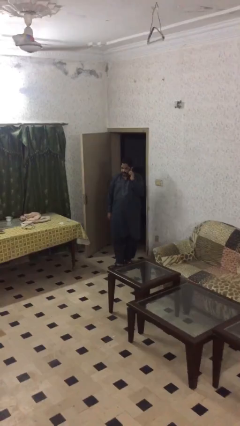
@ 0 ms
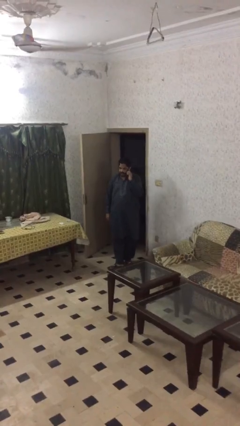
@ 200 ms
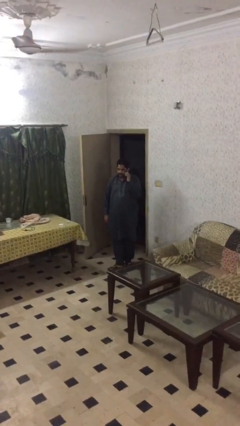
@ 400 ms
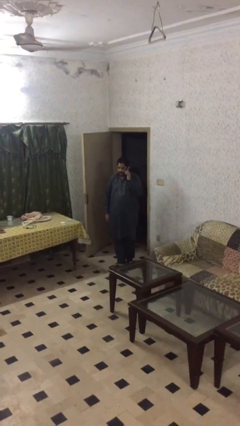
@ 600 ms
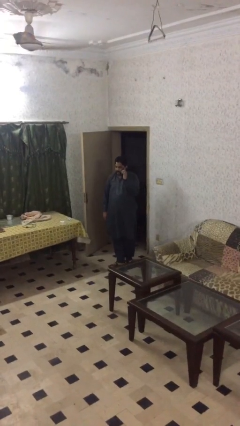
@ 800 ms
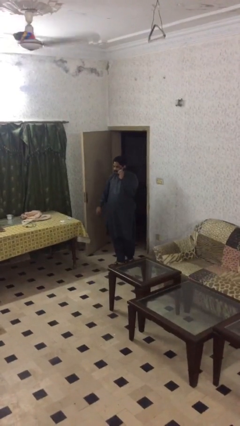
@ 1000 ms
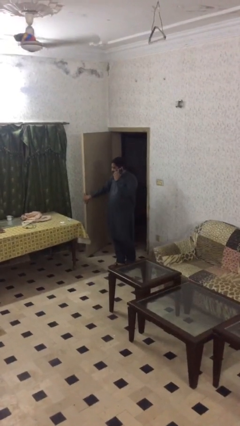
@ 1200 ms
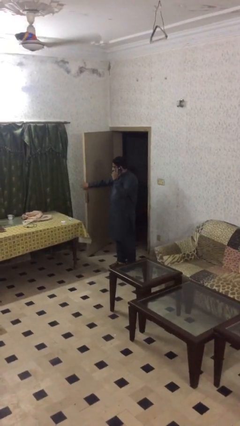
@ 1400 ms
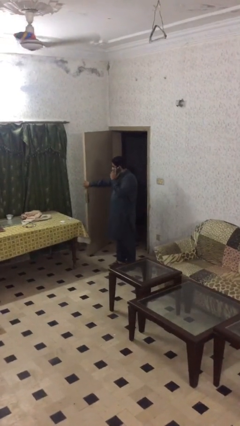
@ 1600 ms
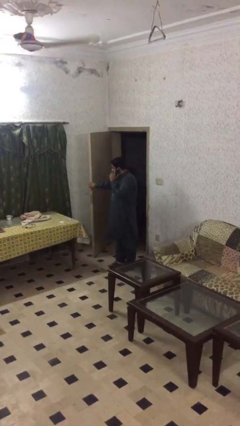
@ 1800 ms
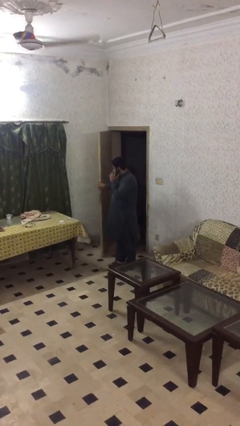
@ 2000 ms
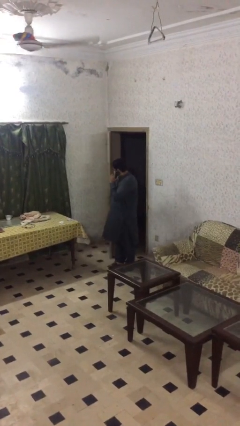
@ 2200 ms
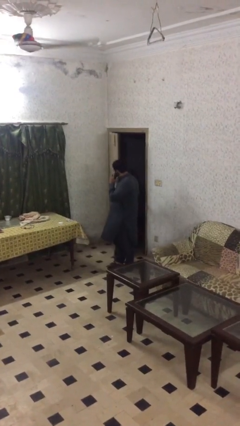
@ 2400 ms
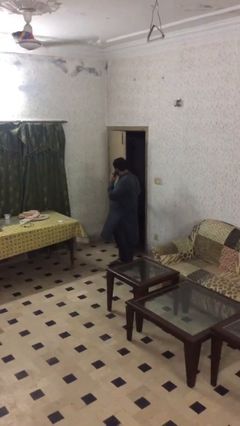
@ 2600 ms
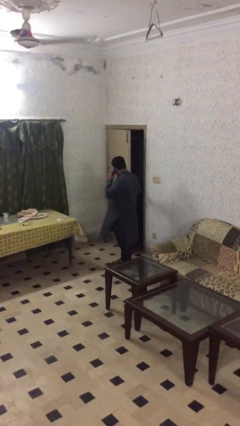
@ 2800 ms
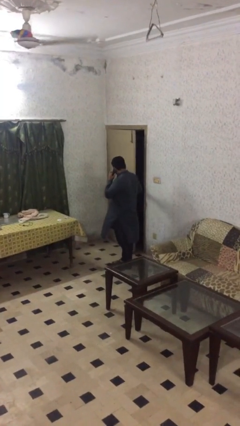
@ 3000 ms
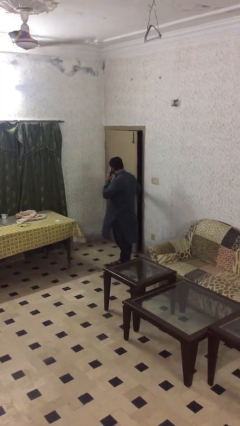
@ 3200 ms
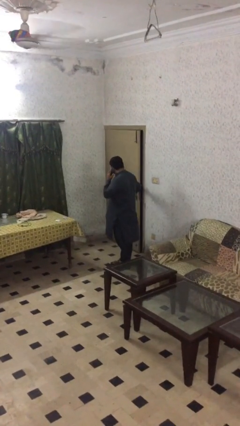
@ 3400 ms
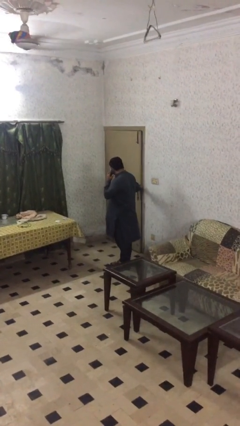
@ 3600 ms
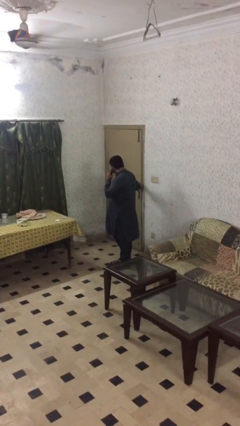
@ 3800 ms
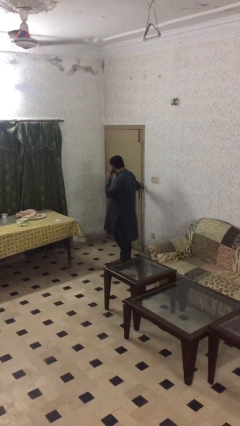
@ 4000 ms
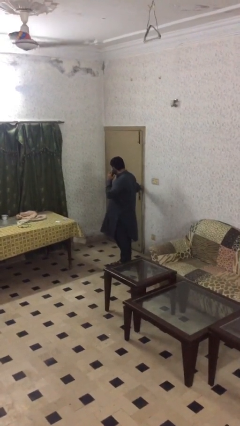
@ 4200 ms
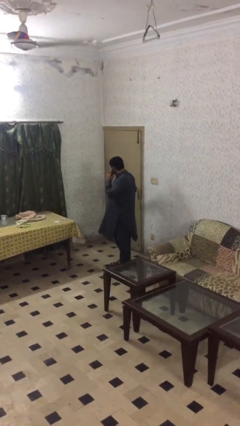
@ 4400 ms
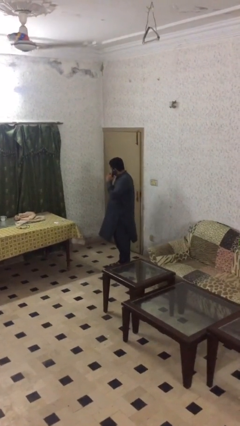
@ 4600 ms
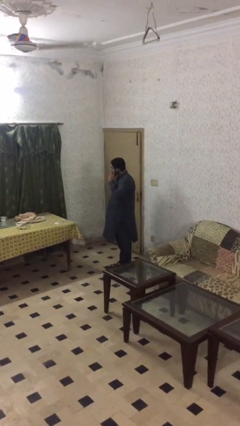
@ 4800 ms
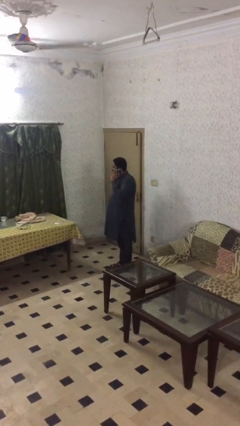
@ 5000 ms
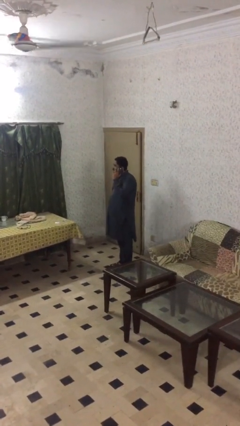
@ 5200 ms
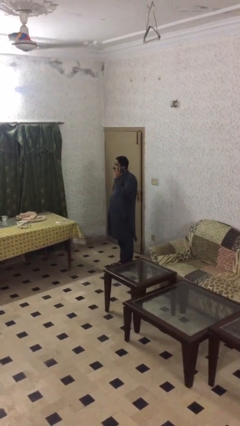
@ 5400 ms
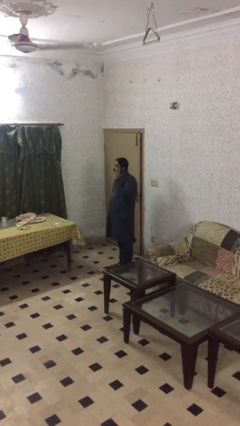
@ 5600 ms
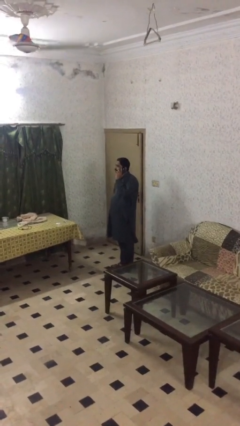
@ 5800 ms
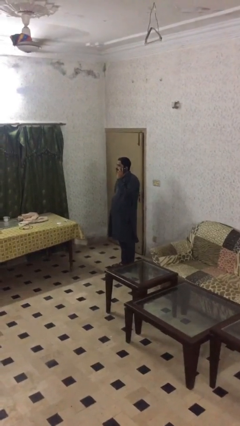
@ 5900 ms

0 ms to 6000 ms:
person closes facility door

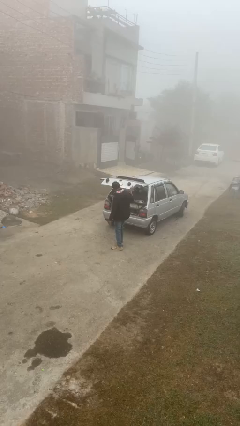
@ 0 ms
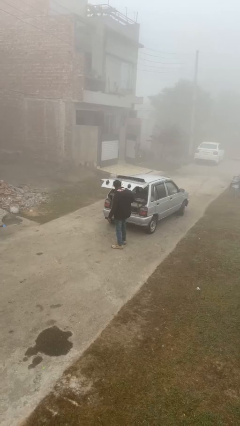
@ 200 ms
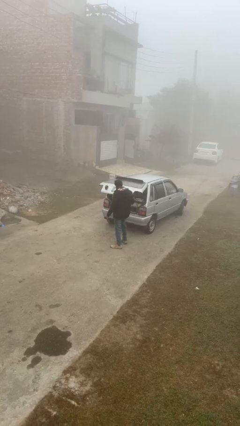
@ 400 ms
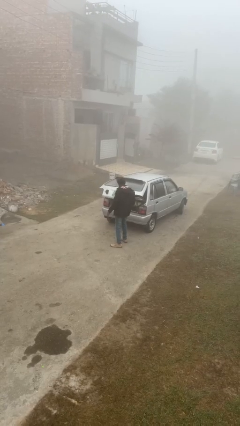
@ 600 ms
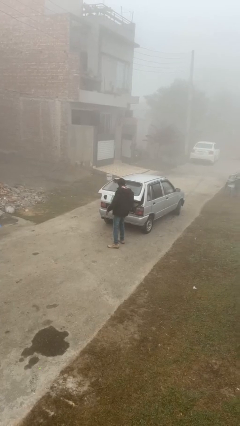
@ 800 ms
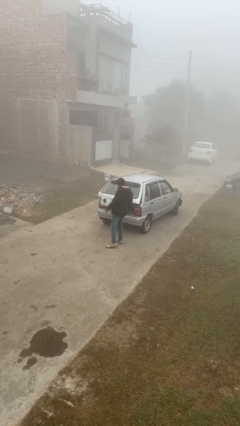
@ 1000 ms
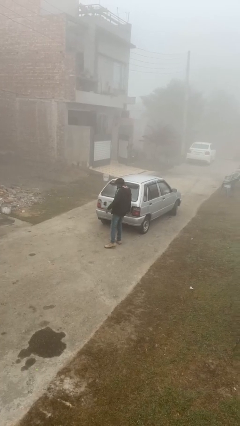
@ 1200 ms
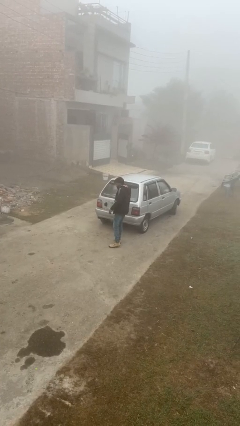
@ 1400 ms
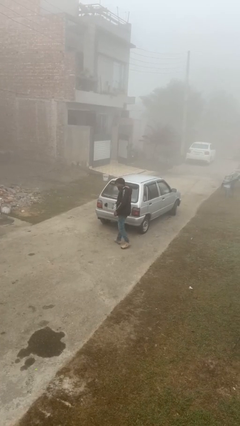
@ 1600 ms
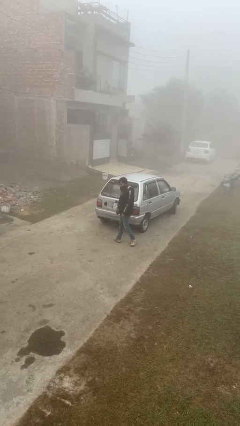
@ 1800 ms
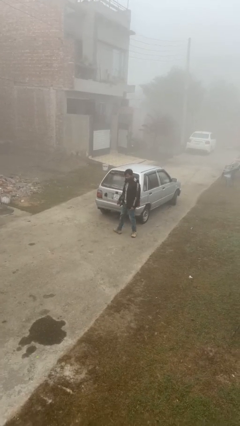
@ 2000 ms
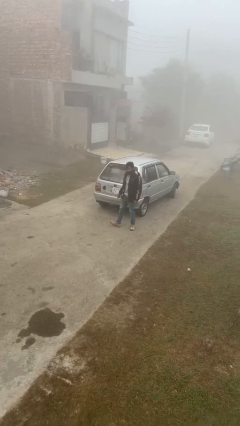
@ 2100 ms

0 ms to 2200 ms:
person closes car trunk

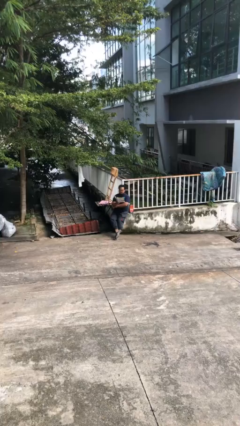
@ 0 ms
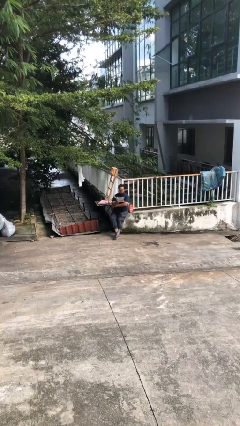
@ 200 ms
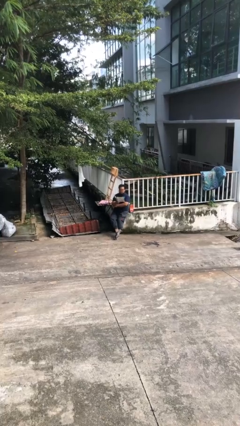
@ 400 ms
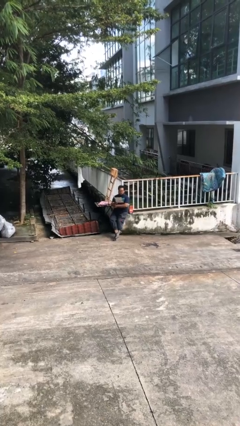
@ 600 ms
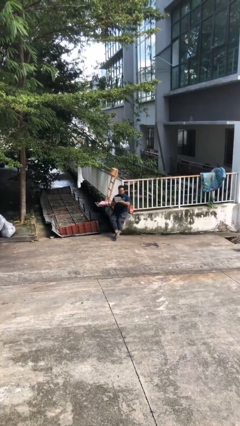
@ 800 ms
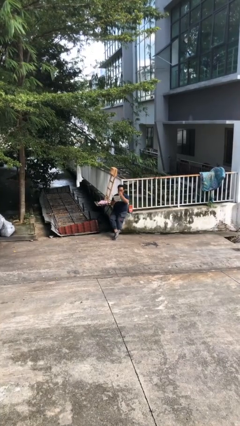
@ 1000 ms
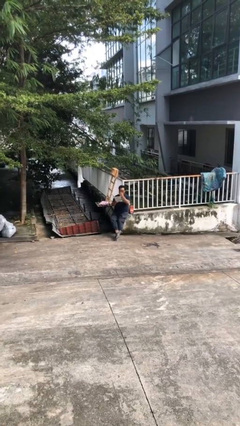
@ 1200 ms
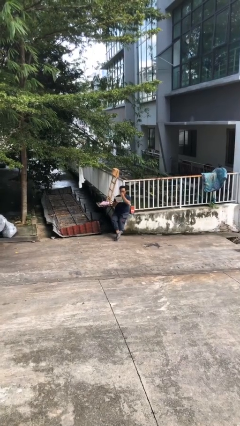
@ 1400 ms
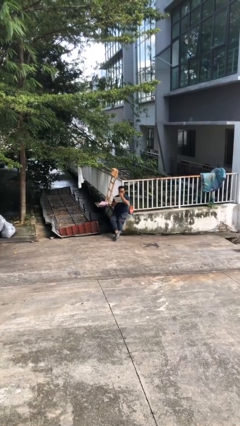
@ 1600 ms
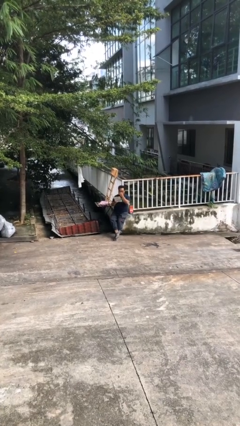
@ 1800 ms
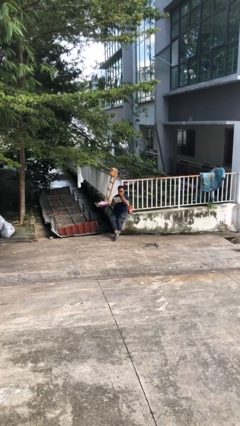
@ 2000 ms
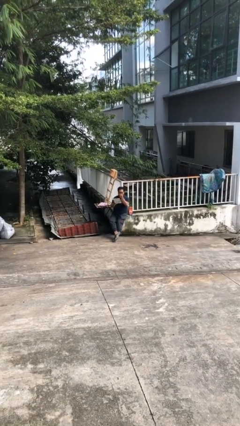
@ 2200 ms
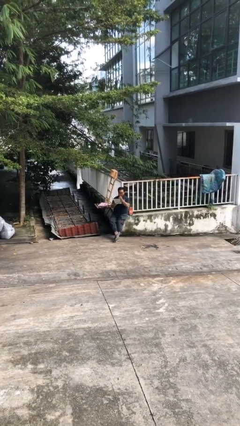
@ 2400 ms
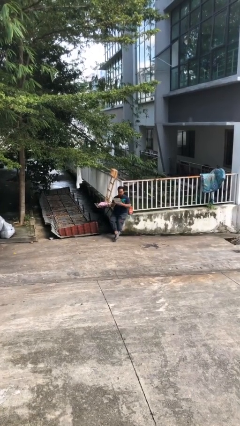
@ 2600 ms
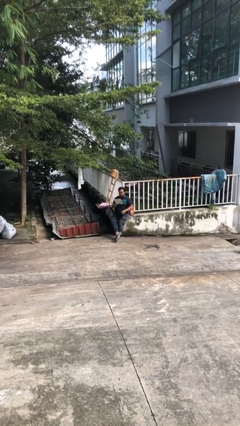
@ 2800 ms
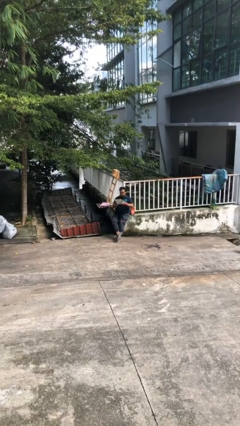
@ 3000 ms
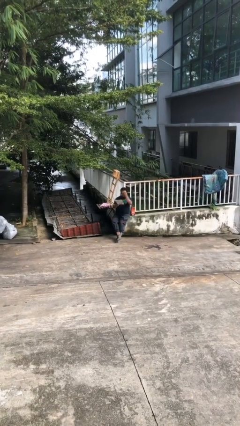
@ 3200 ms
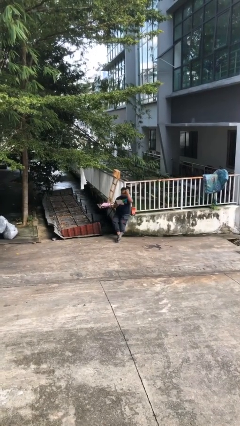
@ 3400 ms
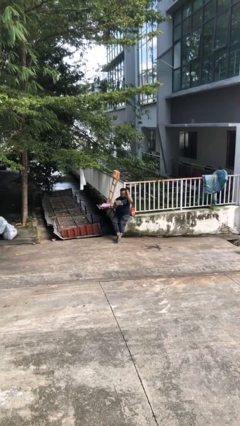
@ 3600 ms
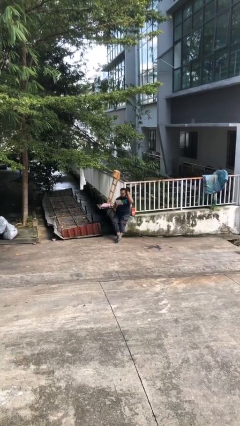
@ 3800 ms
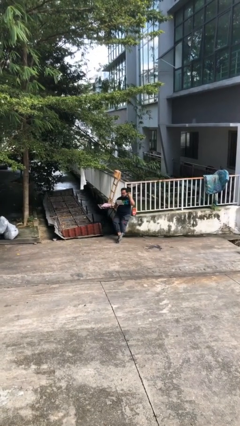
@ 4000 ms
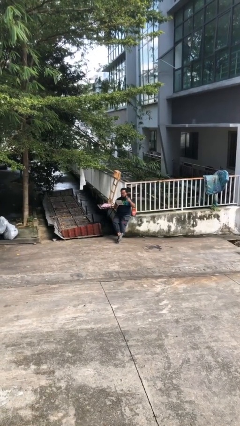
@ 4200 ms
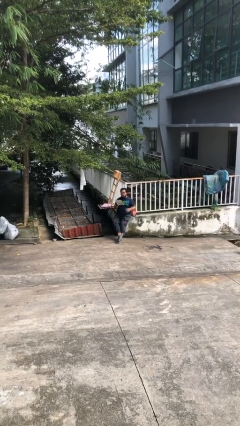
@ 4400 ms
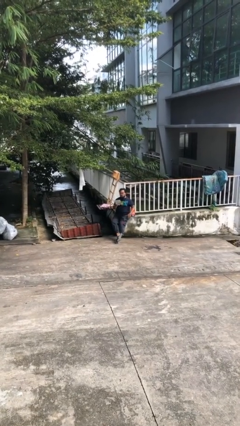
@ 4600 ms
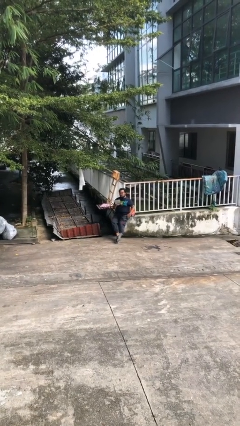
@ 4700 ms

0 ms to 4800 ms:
person reads document

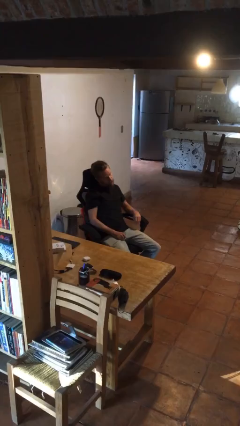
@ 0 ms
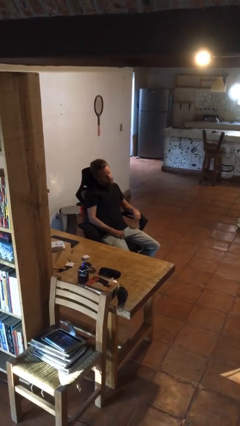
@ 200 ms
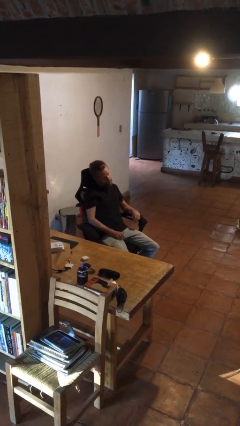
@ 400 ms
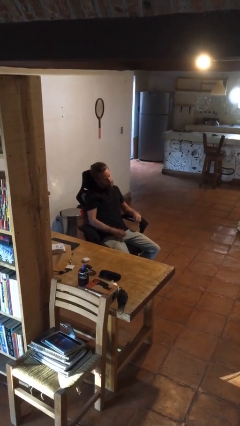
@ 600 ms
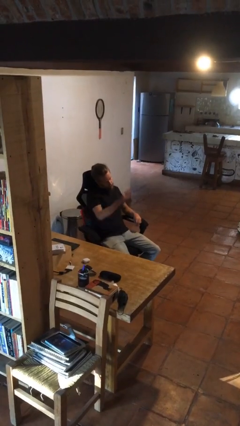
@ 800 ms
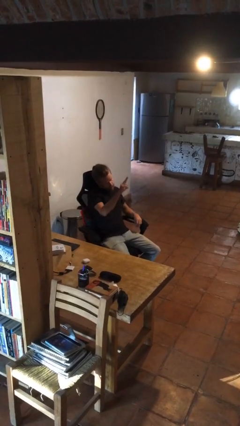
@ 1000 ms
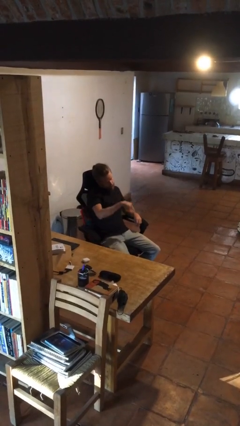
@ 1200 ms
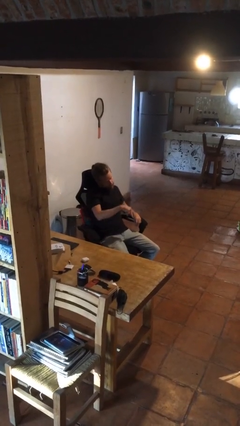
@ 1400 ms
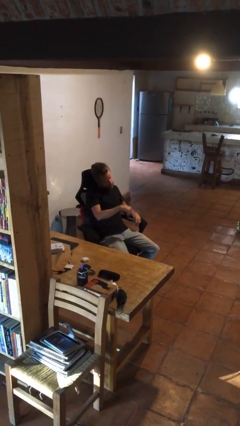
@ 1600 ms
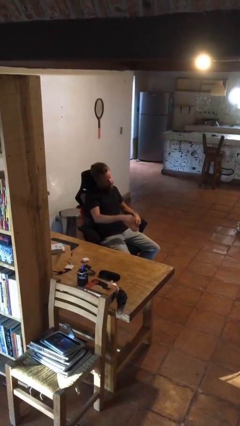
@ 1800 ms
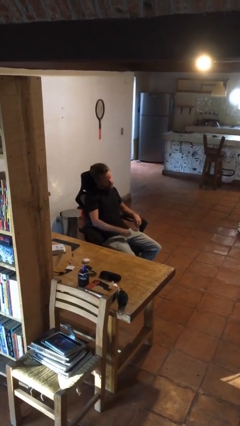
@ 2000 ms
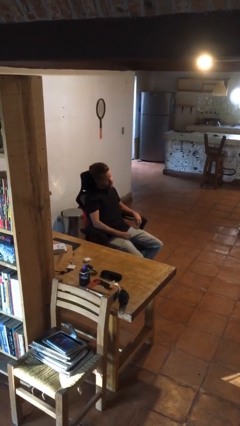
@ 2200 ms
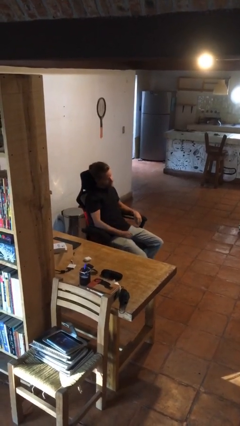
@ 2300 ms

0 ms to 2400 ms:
person gestures swipe down

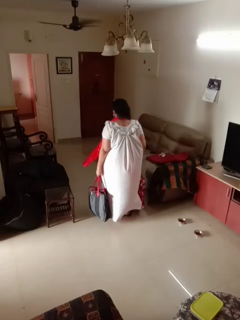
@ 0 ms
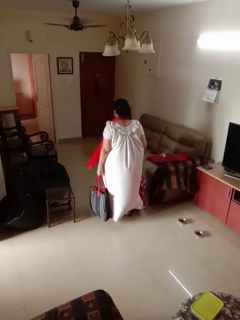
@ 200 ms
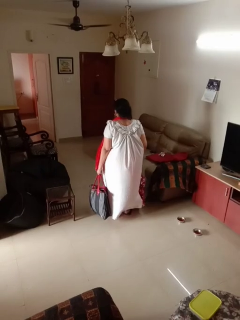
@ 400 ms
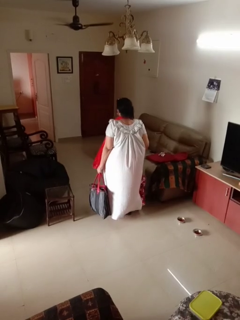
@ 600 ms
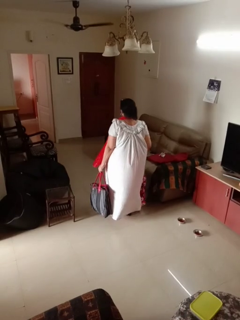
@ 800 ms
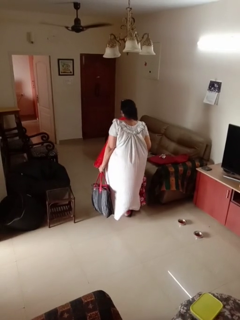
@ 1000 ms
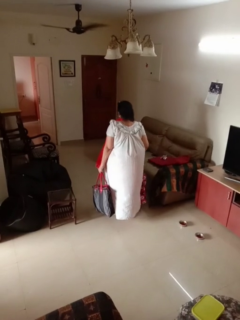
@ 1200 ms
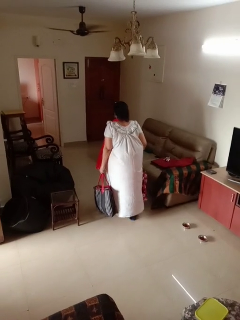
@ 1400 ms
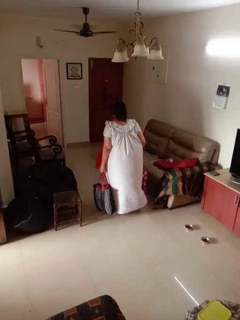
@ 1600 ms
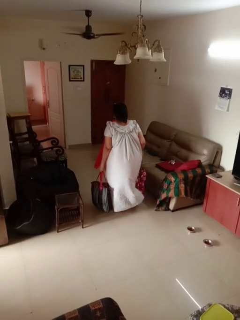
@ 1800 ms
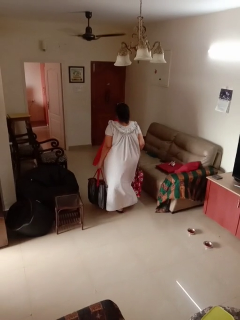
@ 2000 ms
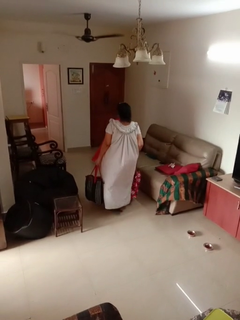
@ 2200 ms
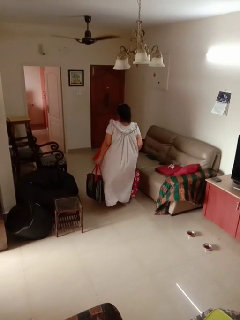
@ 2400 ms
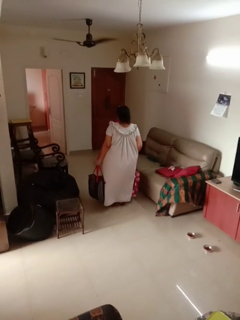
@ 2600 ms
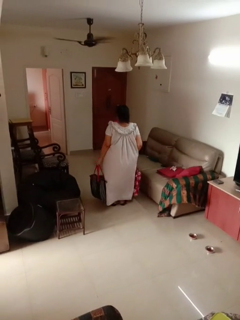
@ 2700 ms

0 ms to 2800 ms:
person carries groceries
